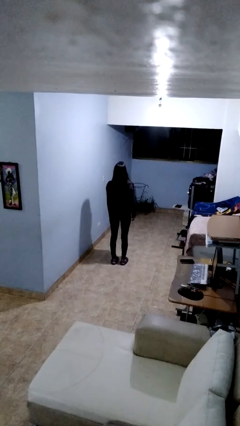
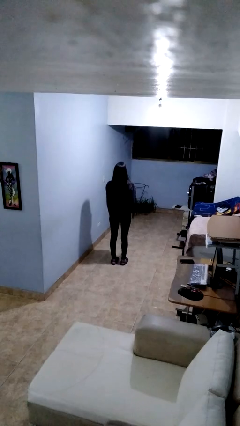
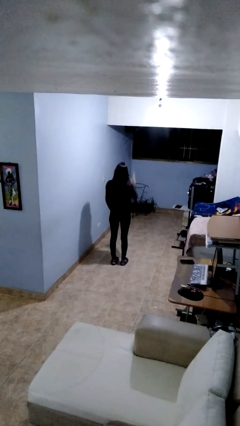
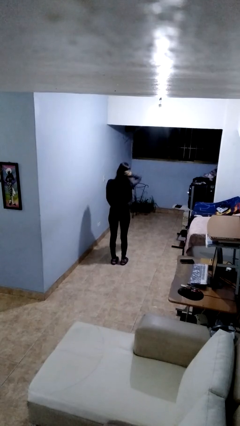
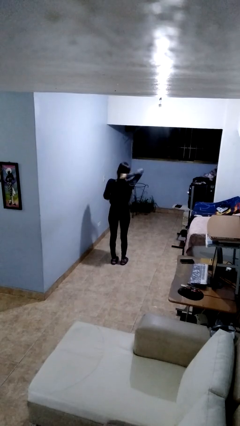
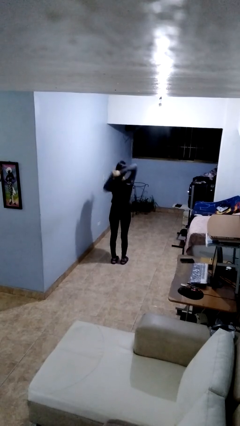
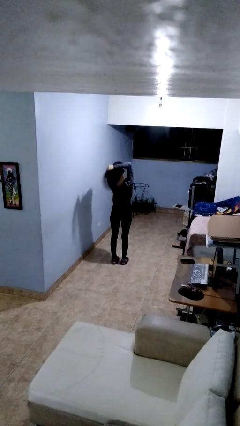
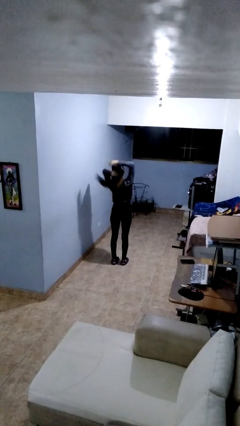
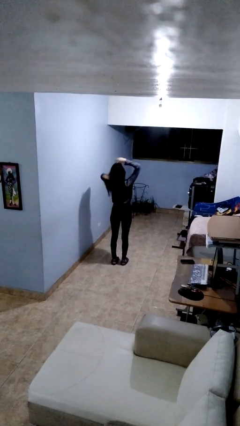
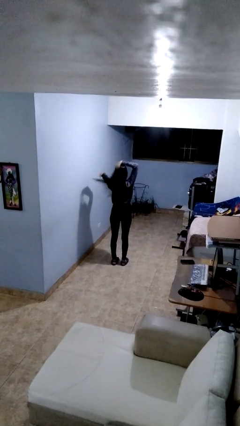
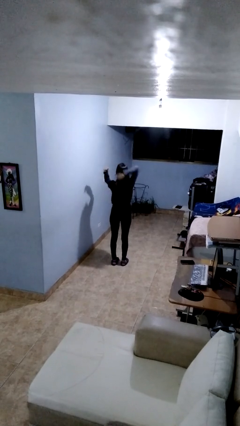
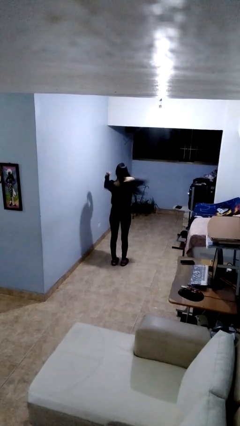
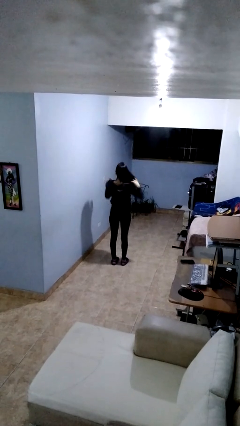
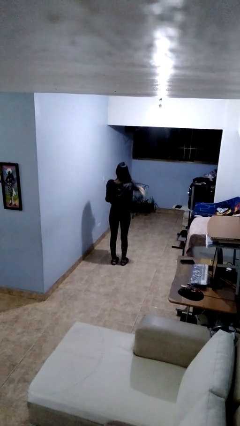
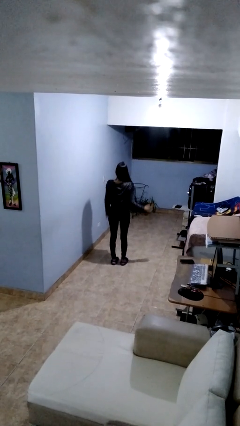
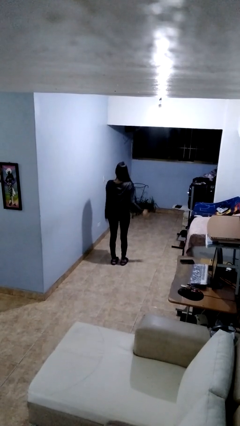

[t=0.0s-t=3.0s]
person strokes hair

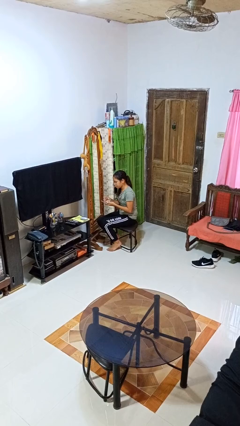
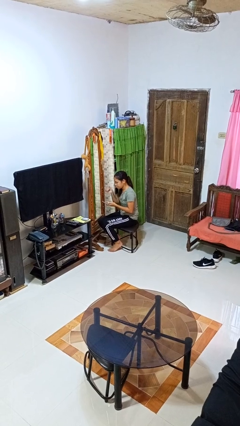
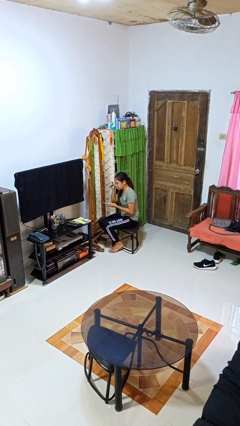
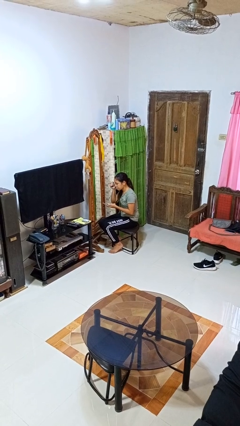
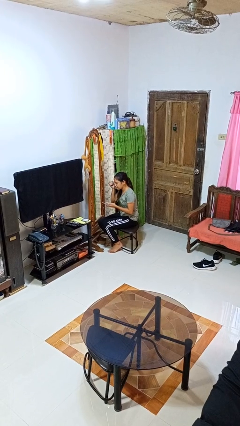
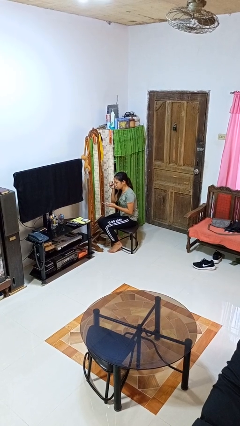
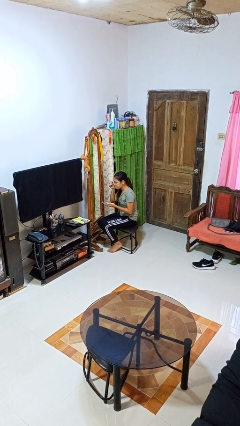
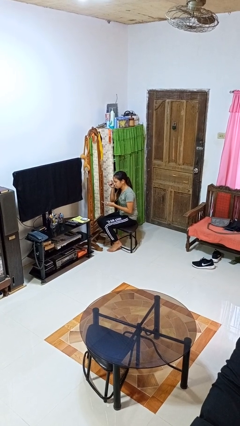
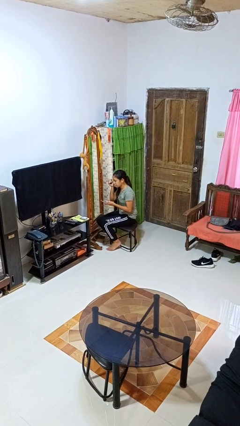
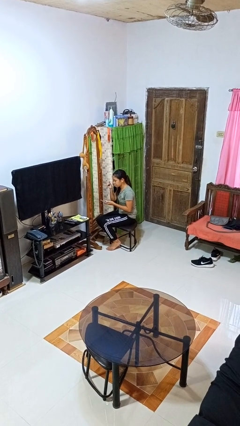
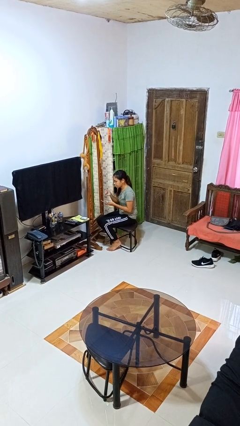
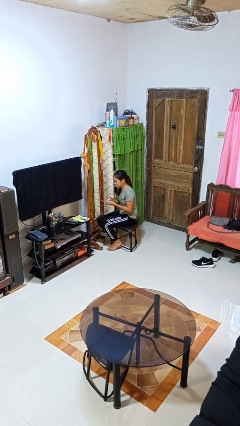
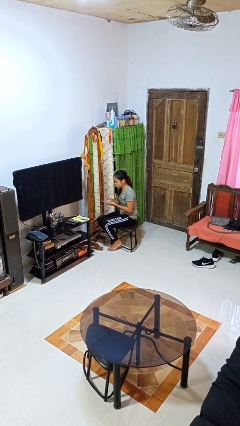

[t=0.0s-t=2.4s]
person applies eye makeup

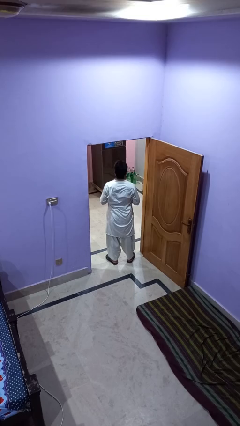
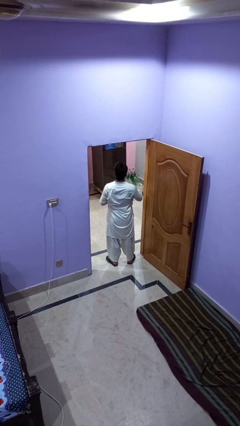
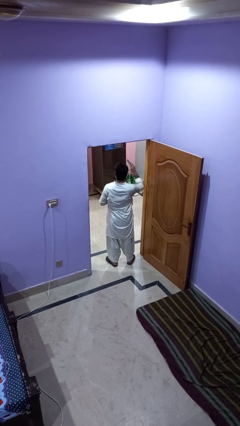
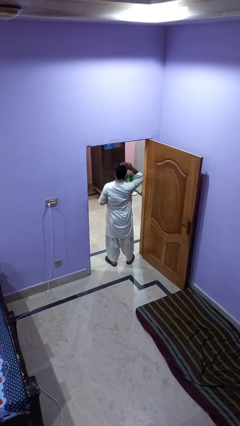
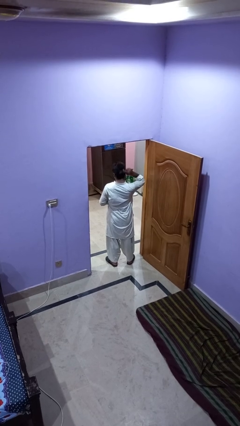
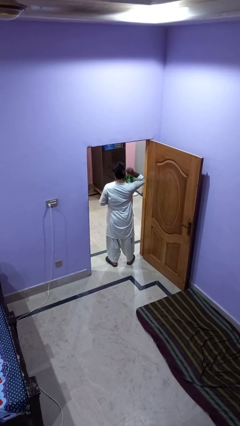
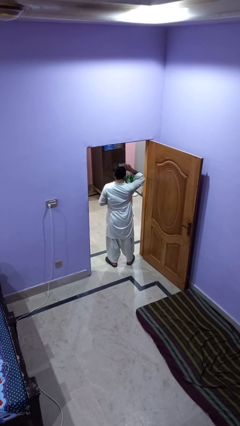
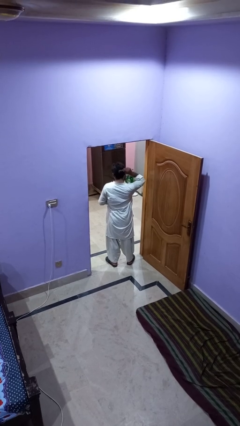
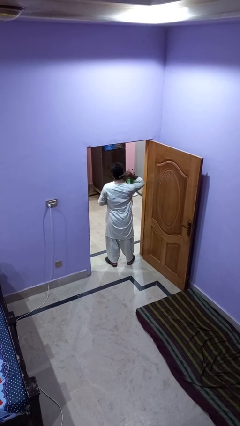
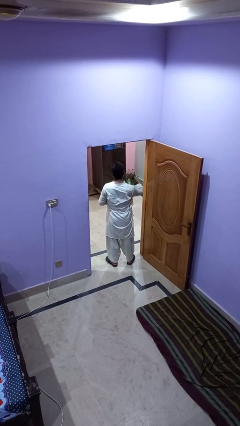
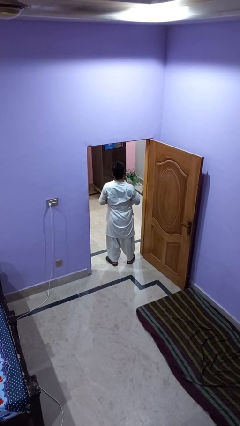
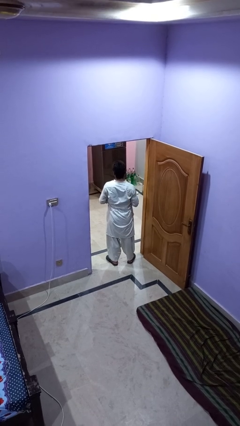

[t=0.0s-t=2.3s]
person brushes hair

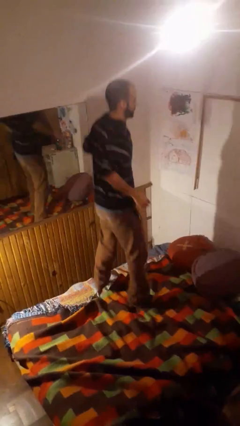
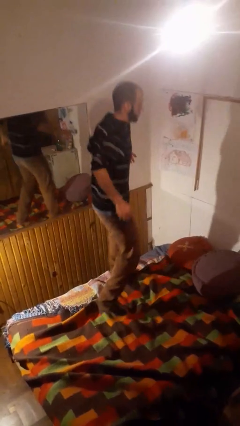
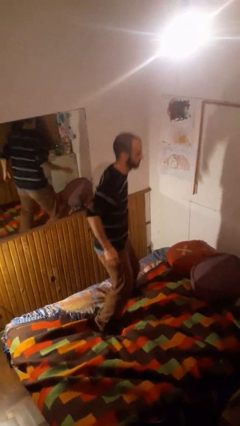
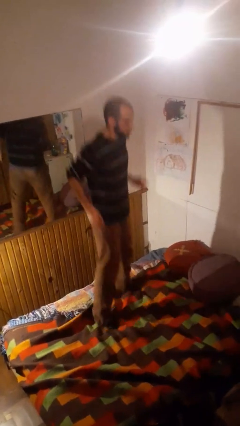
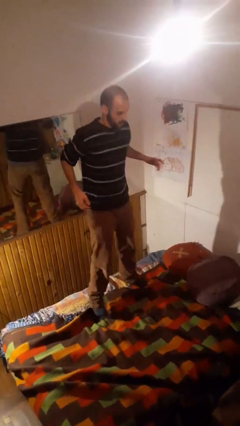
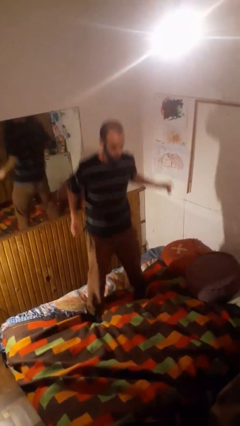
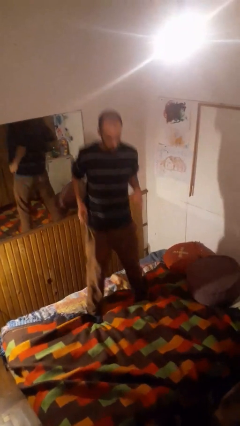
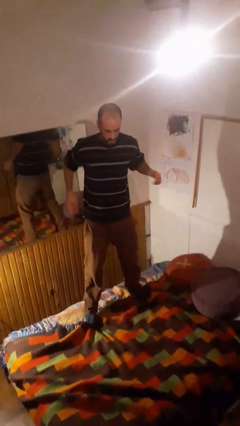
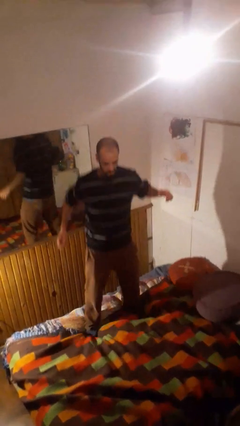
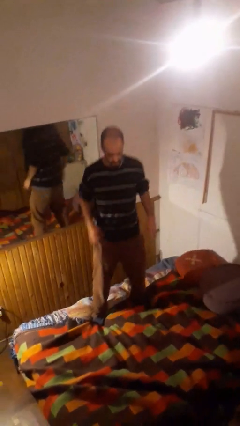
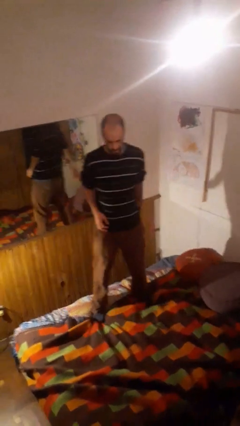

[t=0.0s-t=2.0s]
person jumps on bed

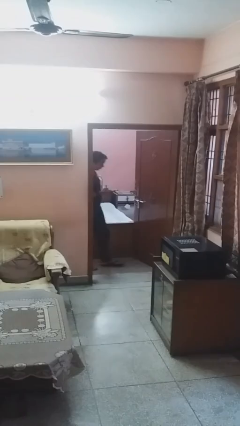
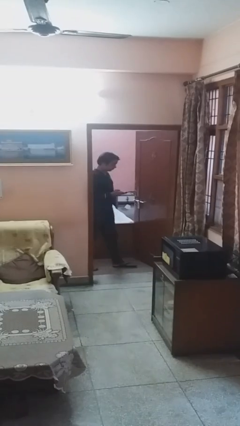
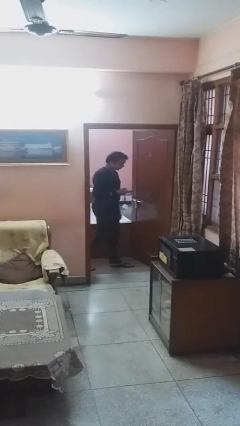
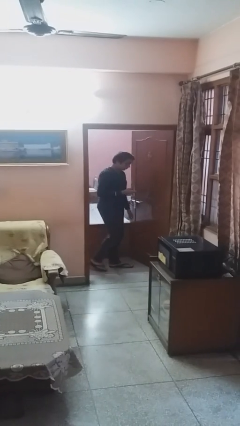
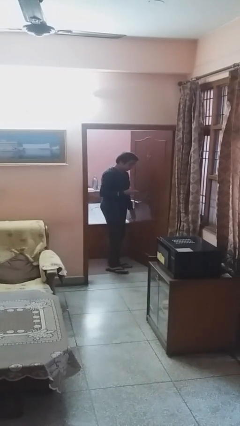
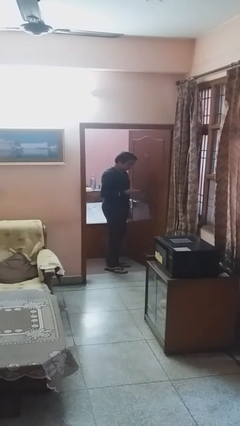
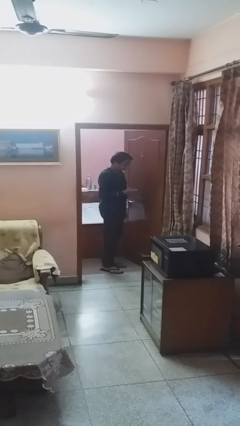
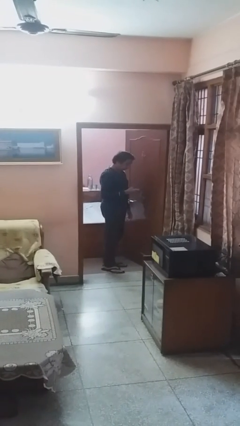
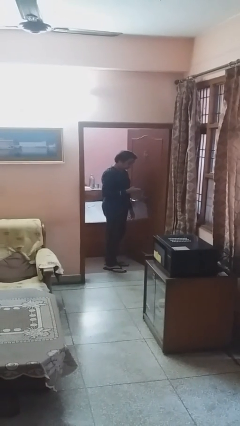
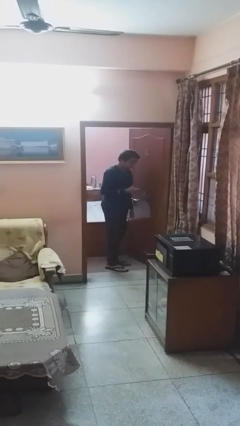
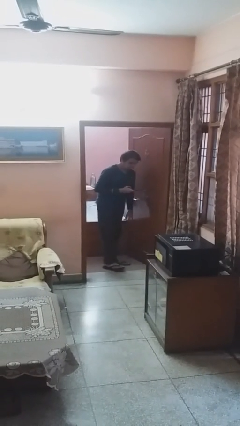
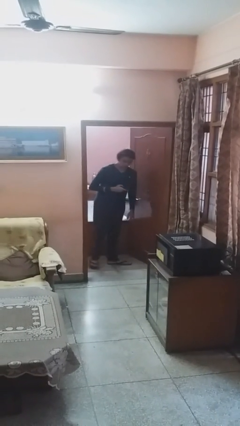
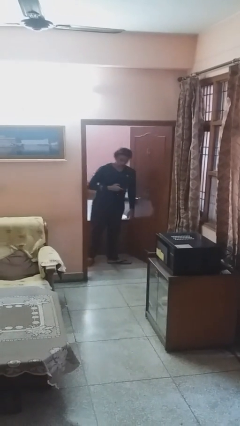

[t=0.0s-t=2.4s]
person enters scene through structure

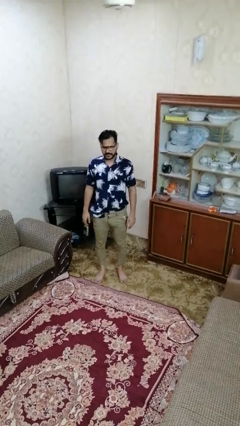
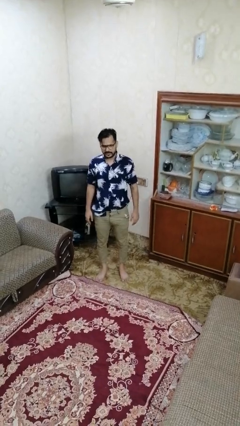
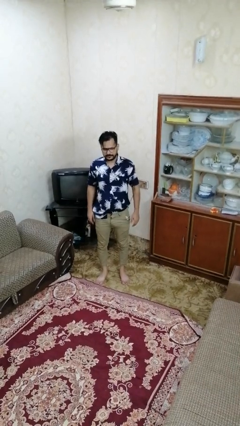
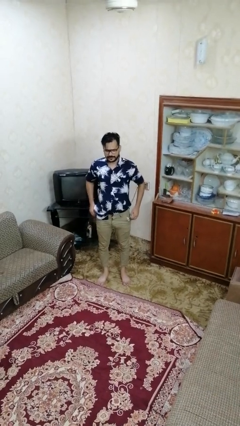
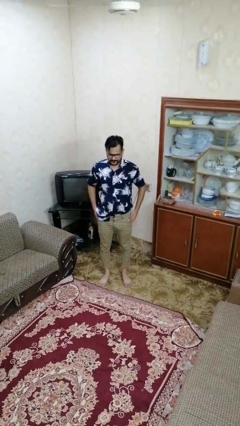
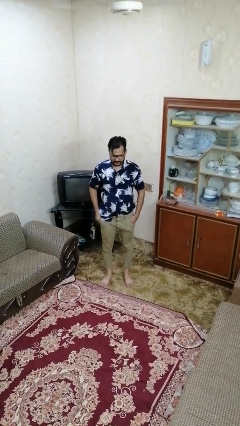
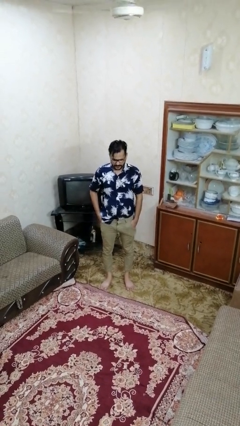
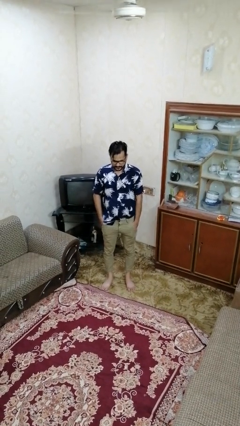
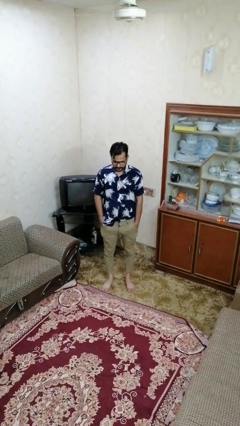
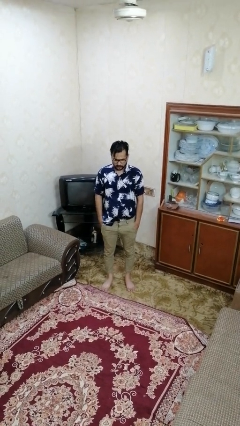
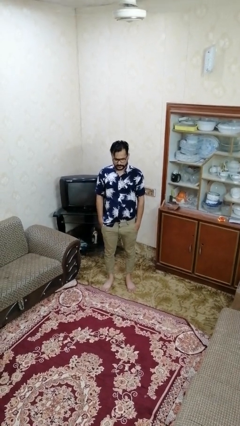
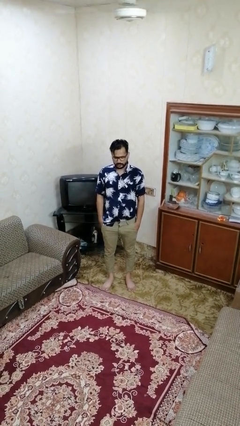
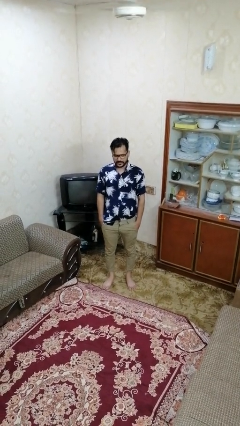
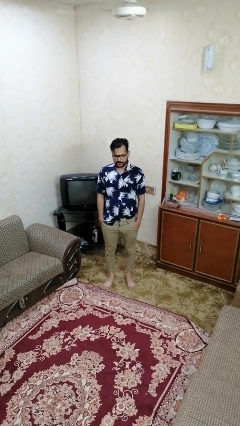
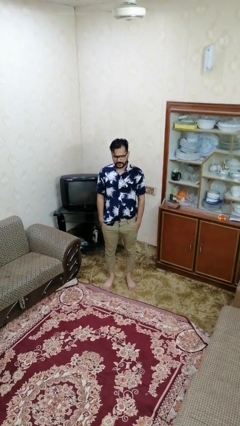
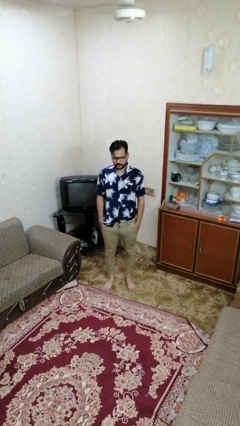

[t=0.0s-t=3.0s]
person puts hands in back pockets

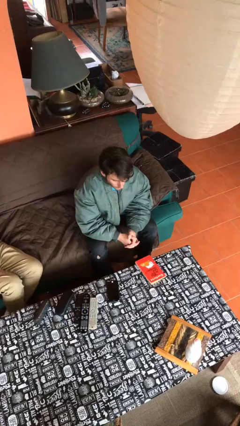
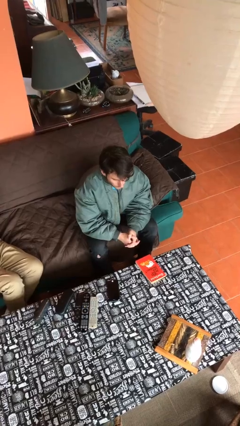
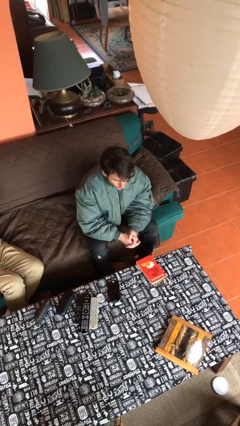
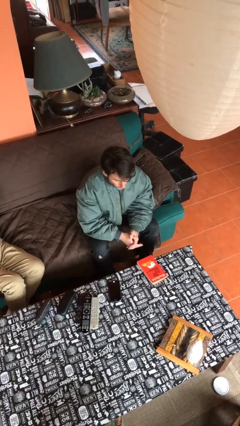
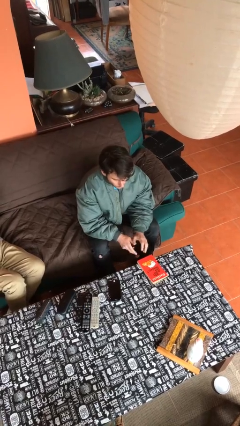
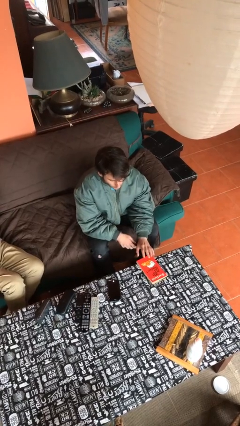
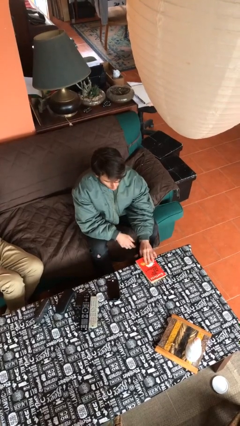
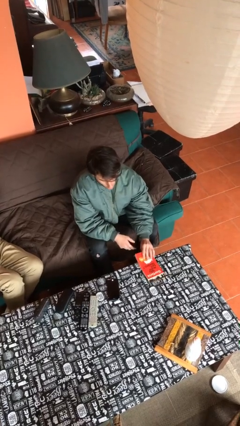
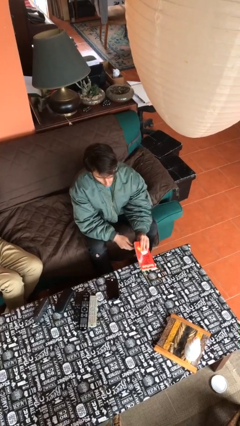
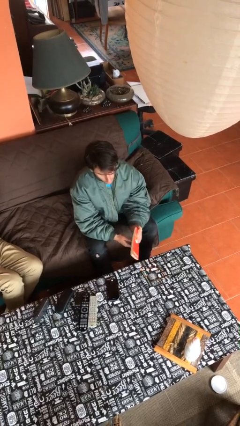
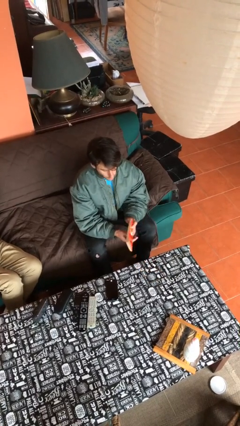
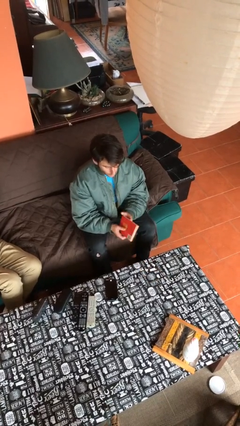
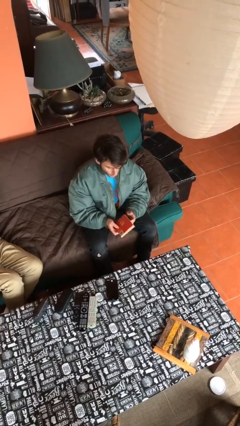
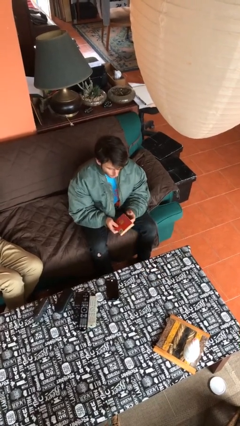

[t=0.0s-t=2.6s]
person picks up object from table
